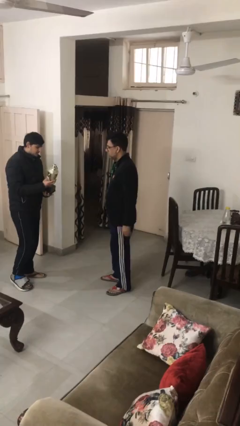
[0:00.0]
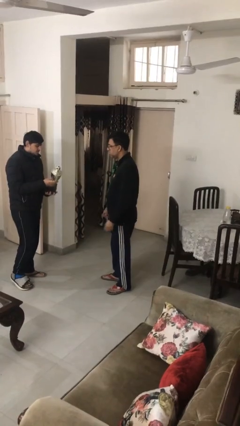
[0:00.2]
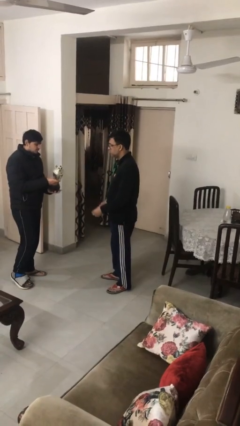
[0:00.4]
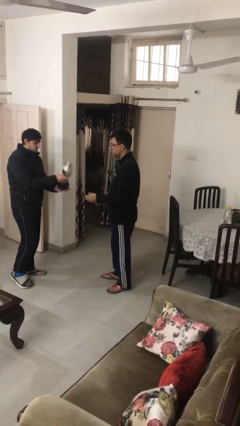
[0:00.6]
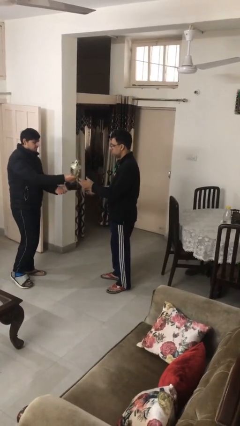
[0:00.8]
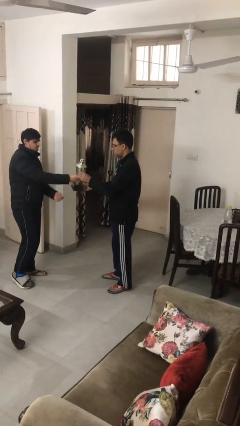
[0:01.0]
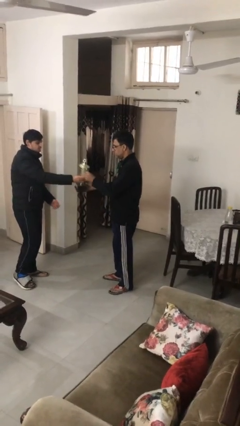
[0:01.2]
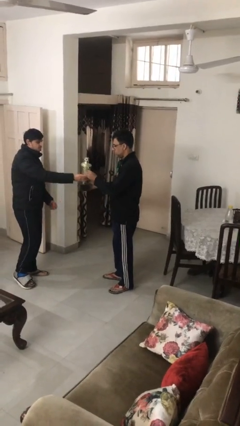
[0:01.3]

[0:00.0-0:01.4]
person transfers object to person

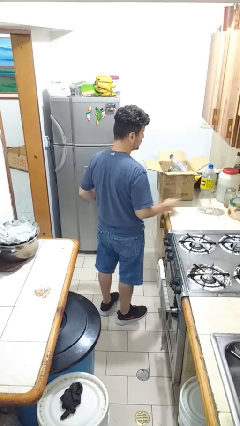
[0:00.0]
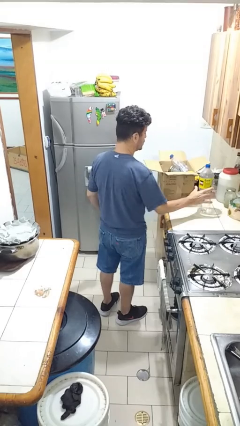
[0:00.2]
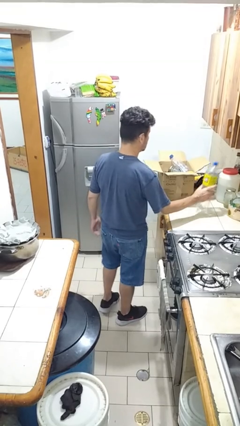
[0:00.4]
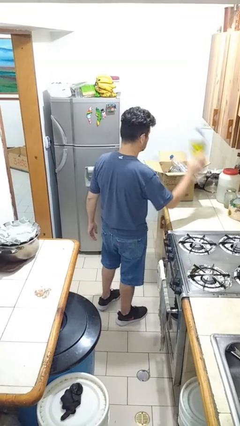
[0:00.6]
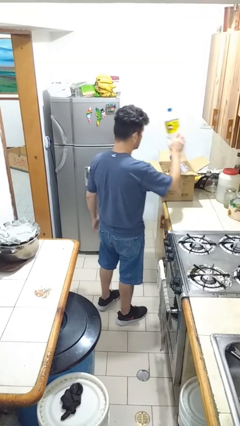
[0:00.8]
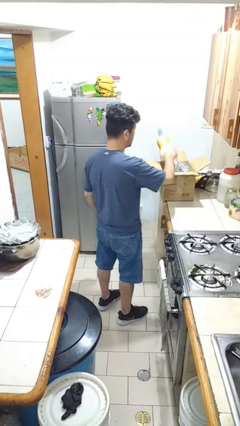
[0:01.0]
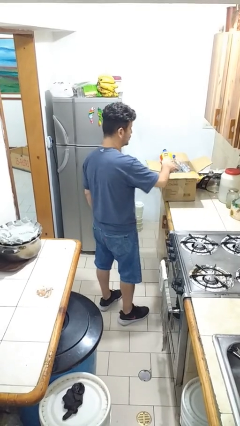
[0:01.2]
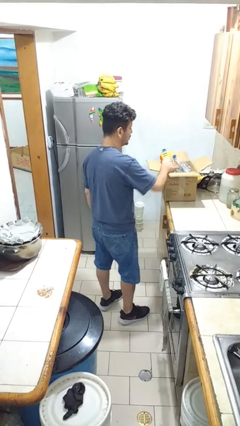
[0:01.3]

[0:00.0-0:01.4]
person puts object into box

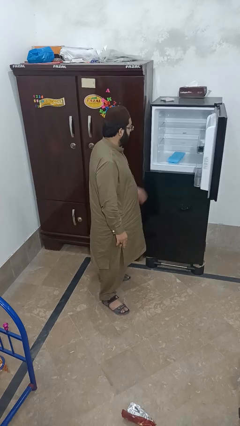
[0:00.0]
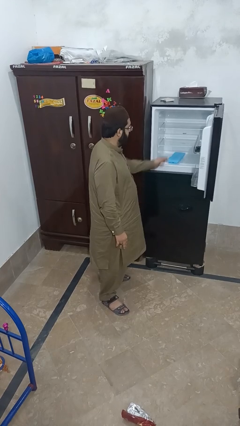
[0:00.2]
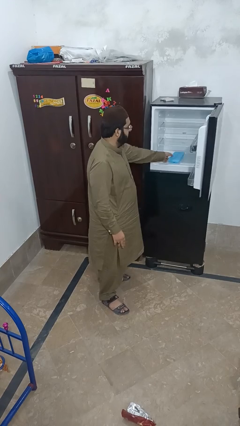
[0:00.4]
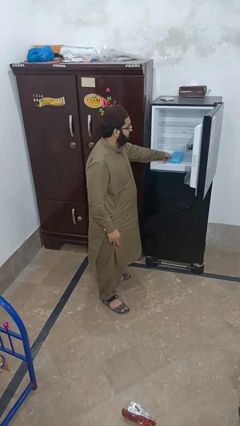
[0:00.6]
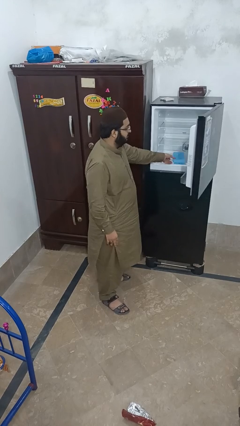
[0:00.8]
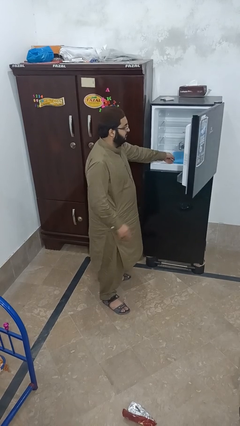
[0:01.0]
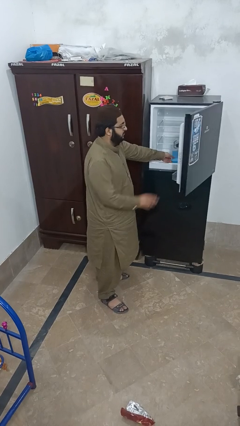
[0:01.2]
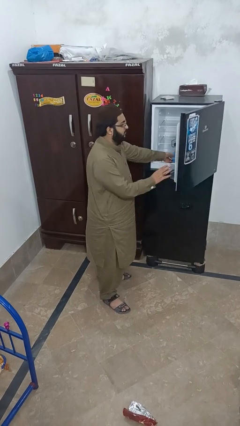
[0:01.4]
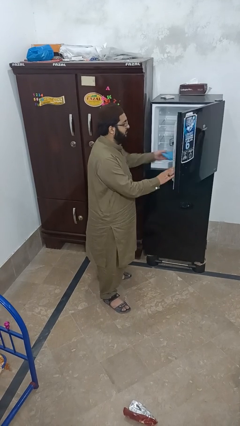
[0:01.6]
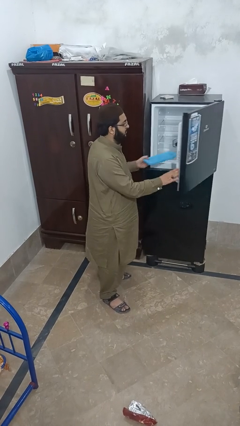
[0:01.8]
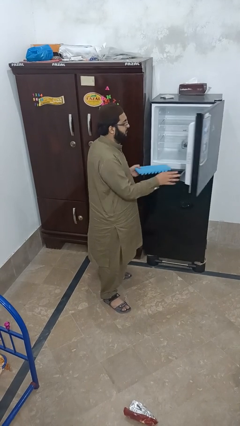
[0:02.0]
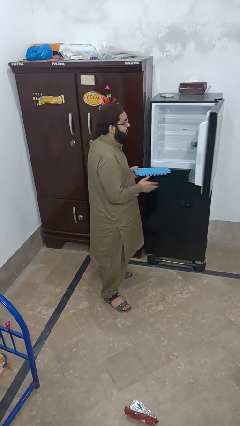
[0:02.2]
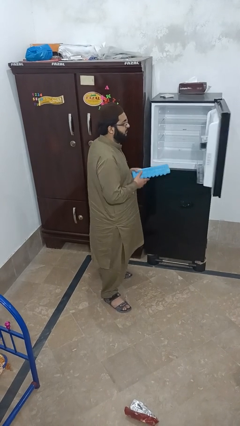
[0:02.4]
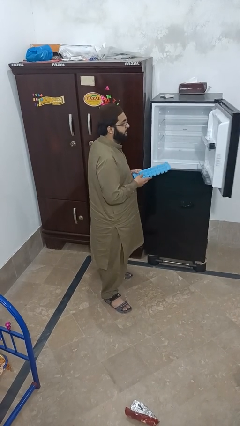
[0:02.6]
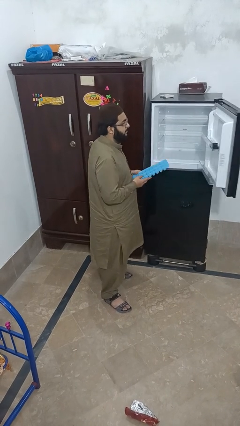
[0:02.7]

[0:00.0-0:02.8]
person takes object from refrigerator

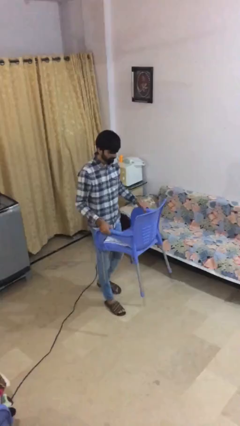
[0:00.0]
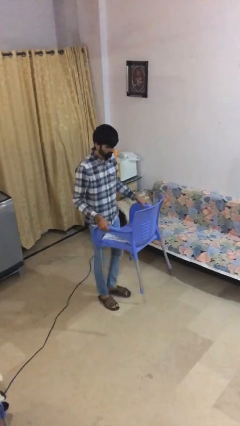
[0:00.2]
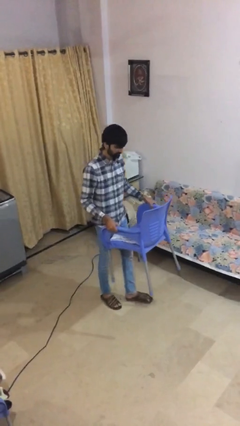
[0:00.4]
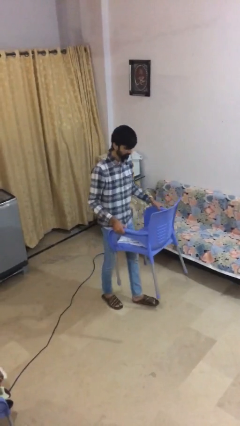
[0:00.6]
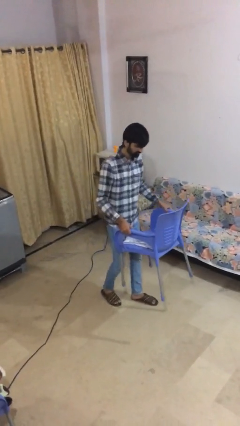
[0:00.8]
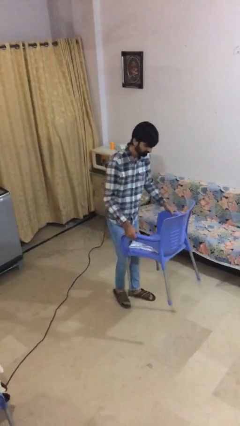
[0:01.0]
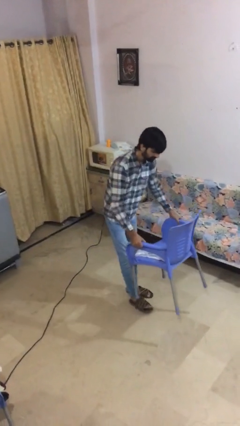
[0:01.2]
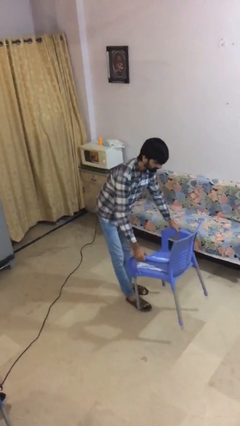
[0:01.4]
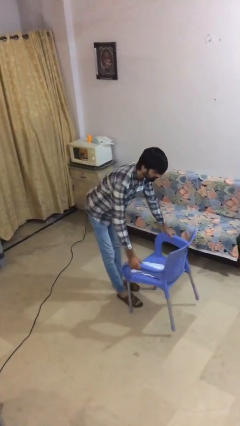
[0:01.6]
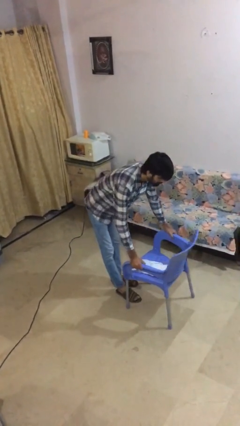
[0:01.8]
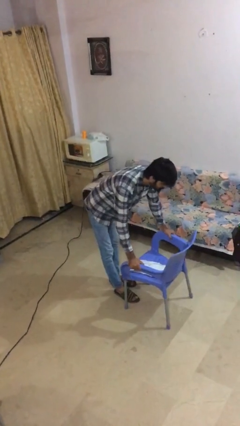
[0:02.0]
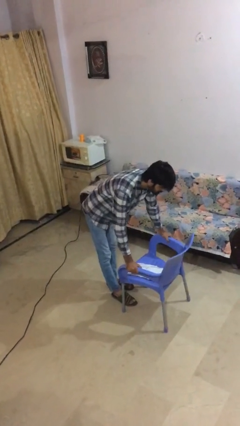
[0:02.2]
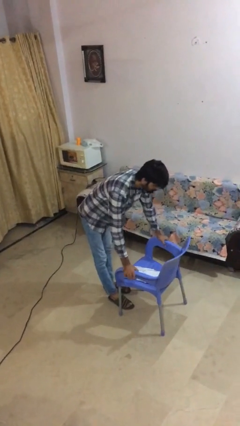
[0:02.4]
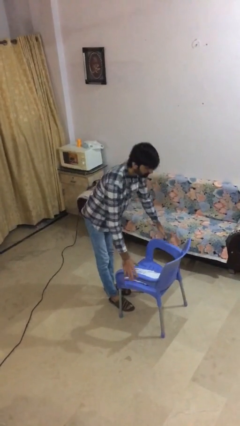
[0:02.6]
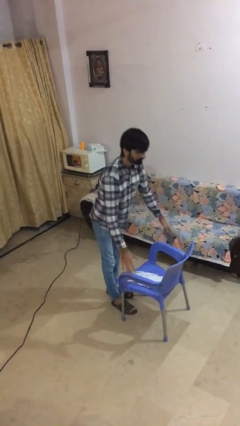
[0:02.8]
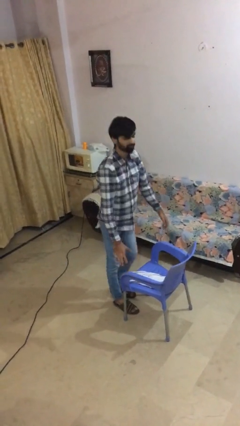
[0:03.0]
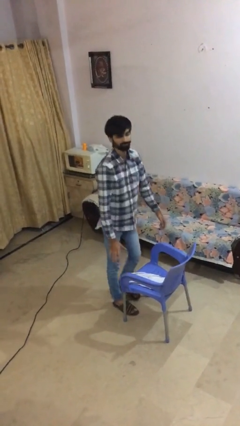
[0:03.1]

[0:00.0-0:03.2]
person puts down object on floor

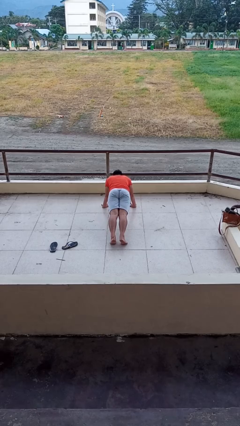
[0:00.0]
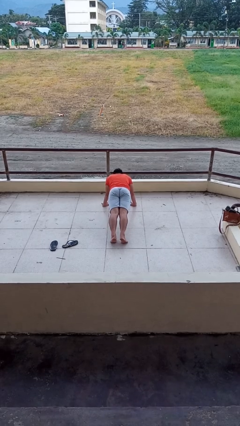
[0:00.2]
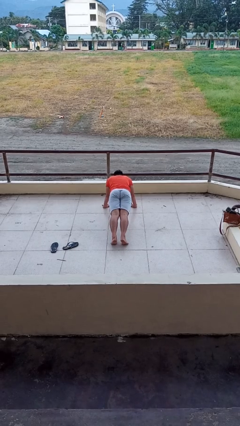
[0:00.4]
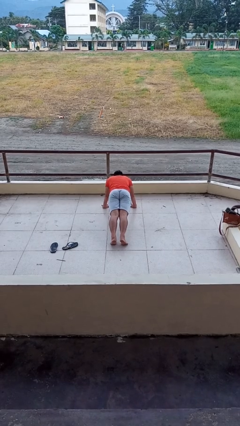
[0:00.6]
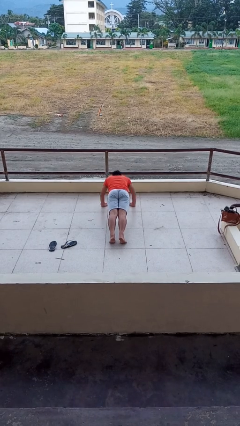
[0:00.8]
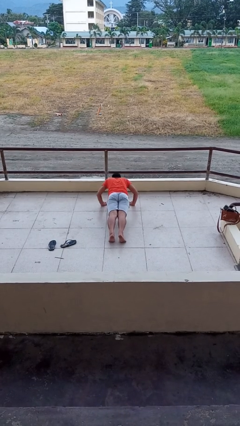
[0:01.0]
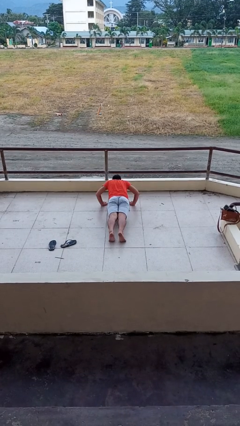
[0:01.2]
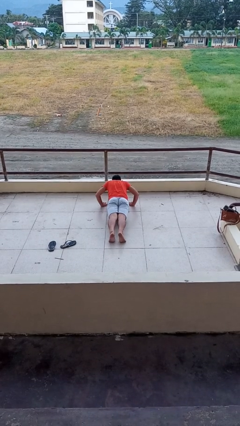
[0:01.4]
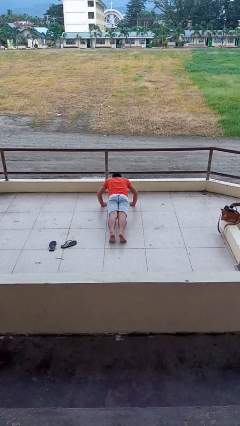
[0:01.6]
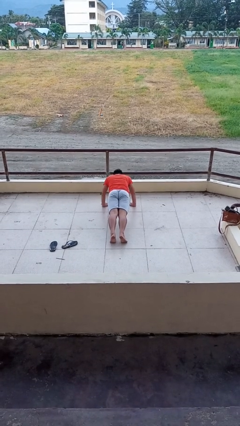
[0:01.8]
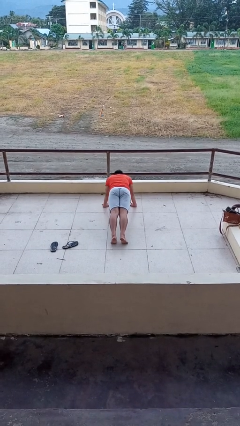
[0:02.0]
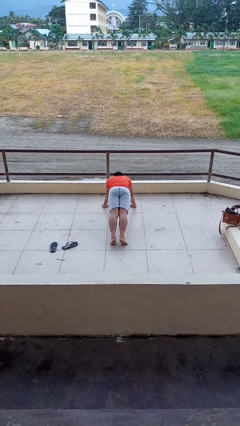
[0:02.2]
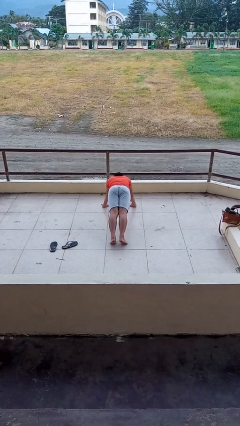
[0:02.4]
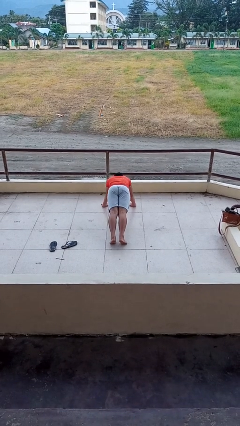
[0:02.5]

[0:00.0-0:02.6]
person exercises with pushup

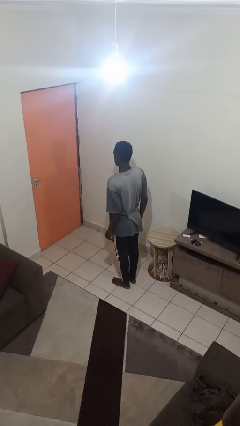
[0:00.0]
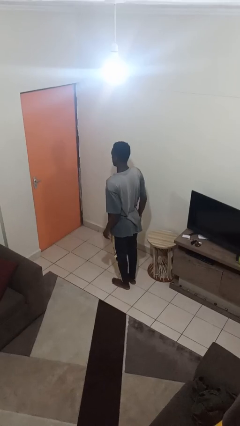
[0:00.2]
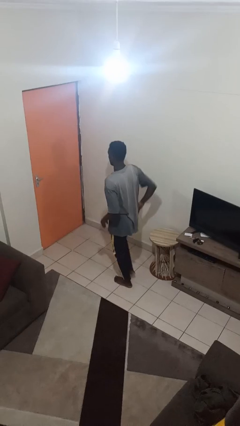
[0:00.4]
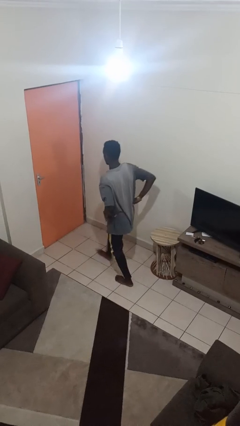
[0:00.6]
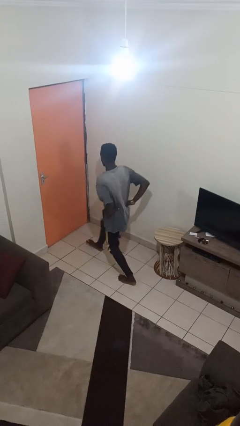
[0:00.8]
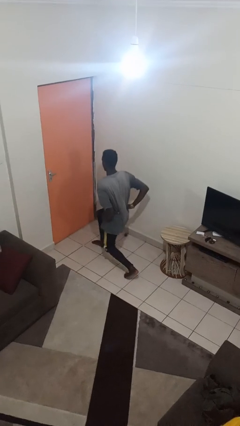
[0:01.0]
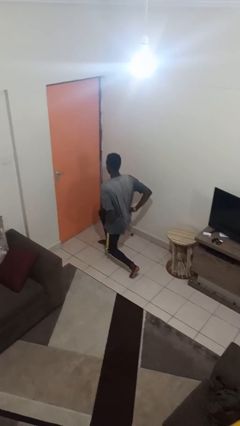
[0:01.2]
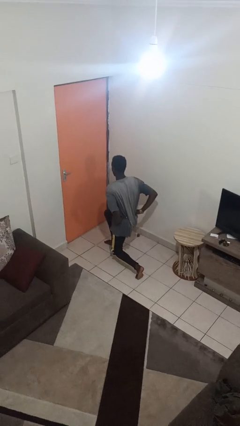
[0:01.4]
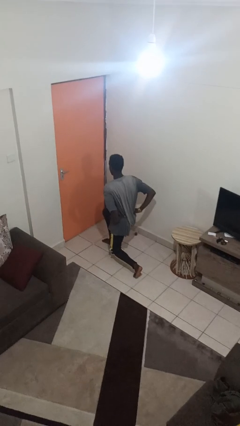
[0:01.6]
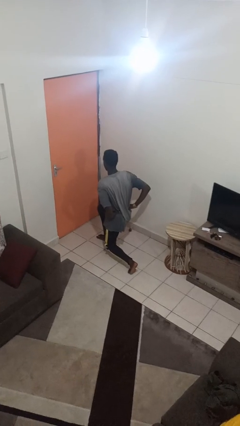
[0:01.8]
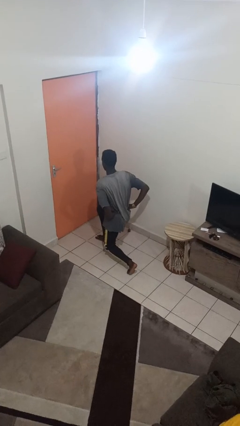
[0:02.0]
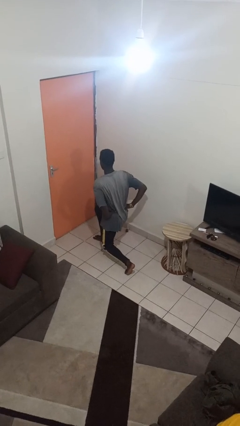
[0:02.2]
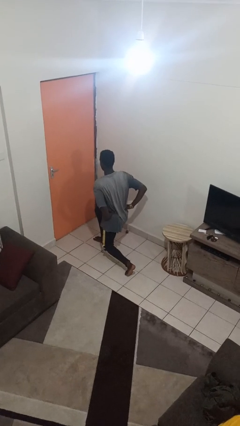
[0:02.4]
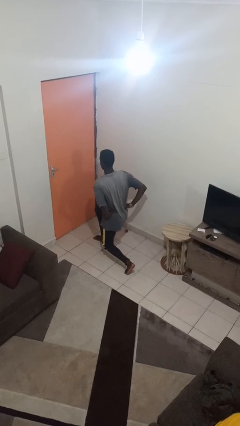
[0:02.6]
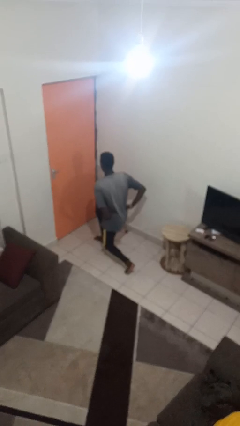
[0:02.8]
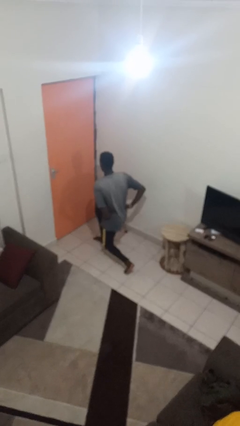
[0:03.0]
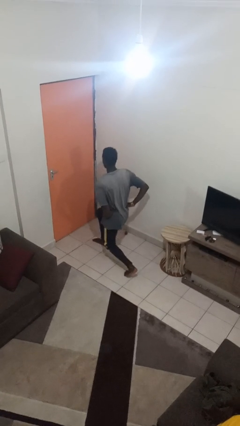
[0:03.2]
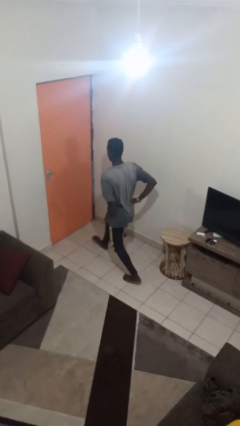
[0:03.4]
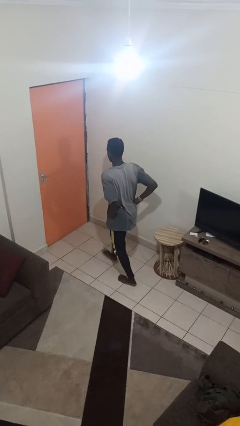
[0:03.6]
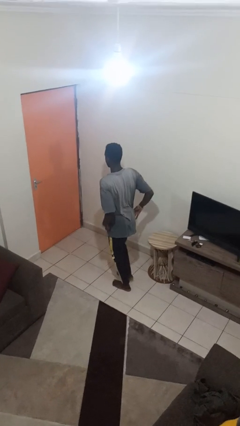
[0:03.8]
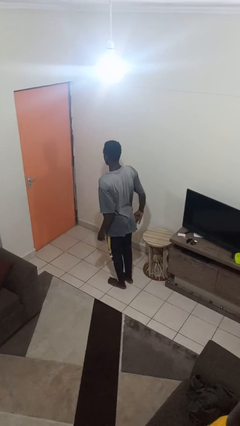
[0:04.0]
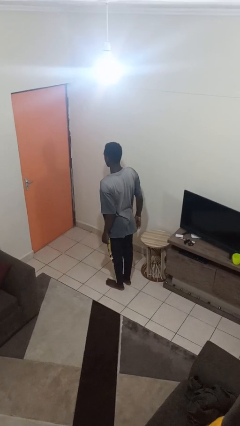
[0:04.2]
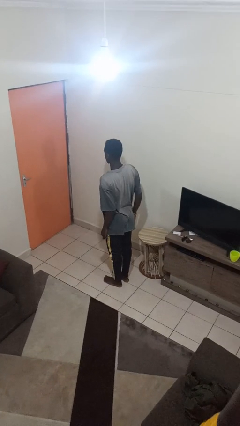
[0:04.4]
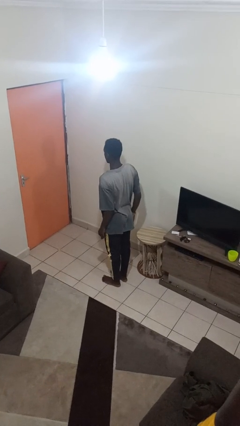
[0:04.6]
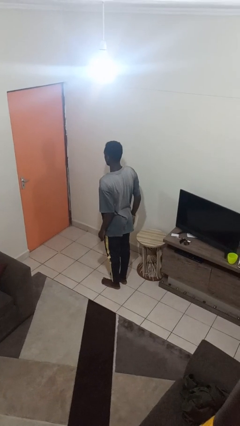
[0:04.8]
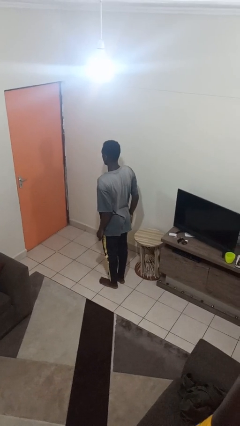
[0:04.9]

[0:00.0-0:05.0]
person exercises with lunges

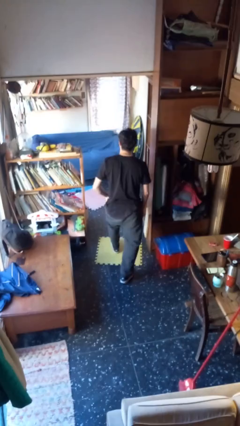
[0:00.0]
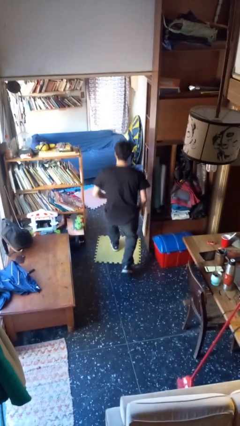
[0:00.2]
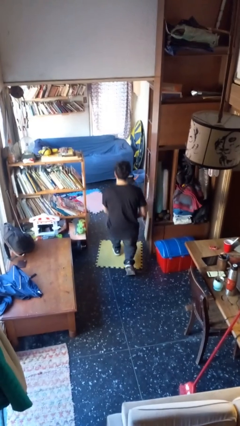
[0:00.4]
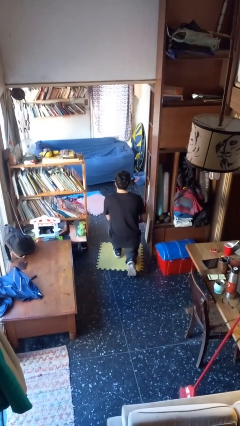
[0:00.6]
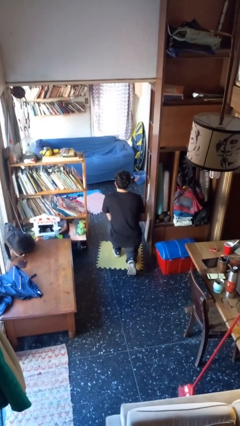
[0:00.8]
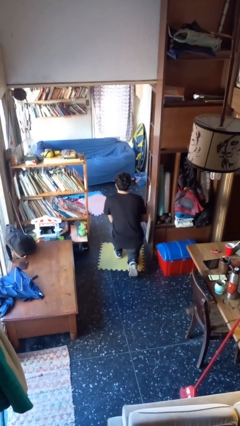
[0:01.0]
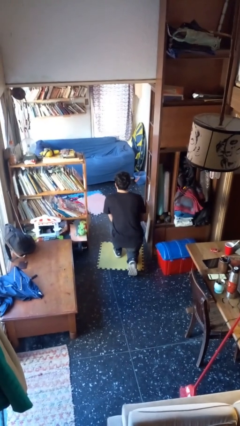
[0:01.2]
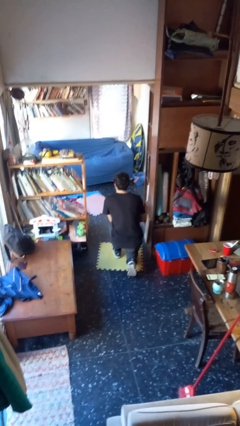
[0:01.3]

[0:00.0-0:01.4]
person kneels
